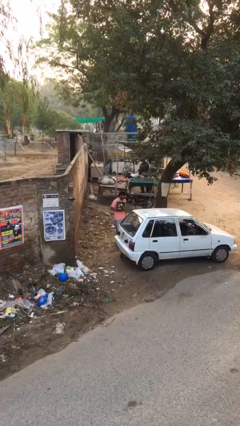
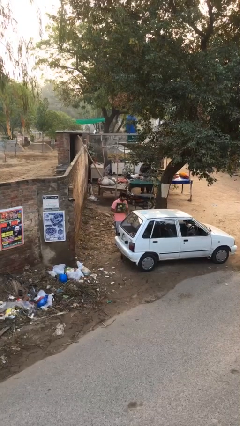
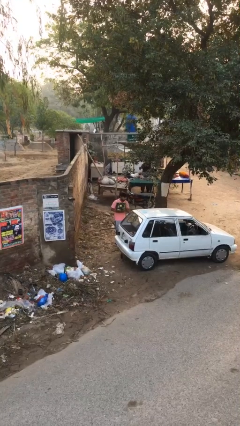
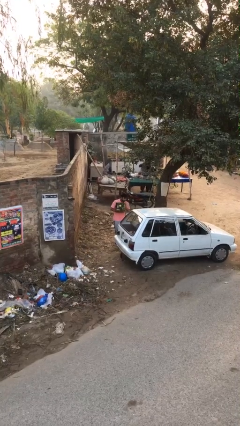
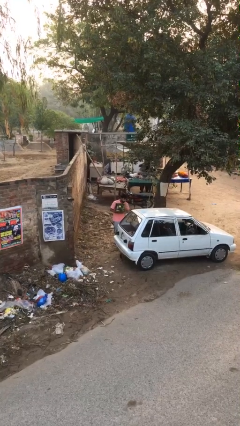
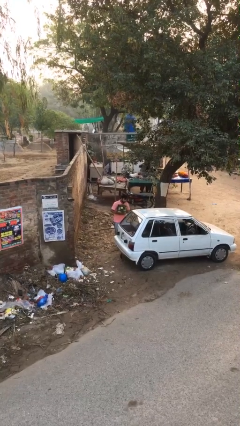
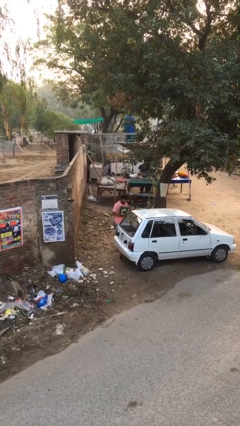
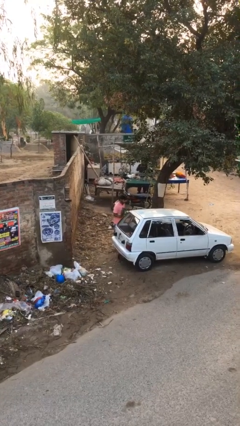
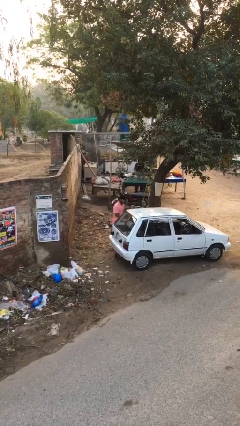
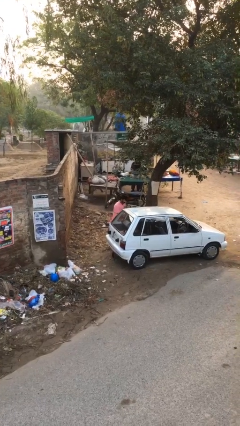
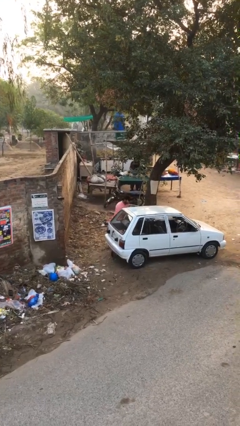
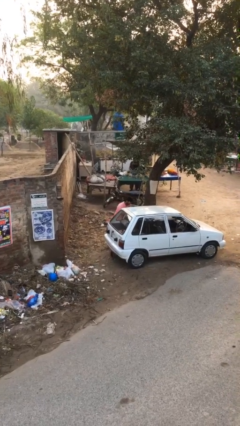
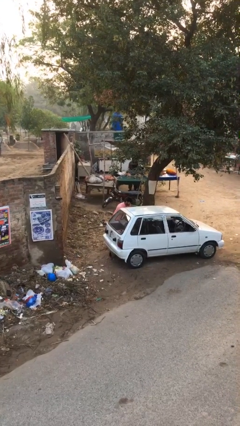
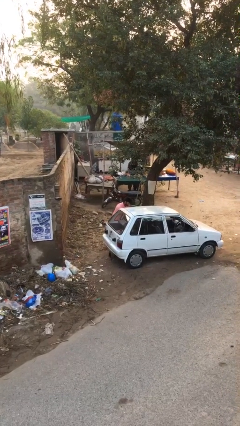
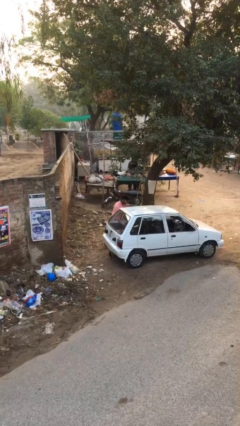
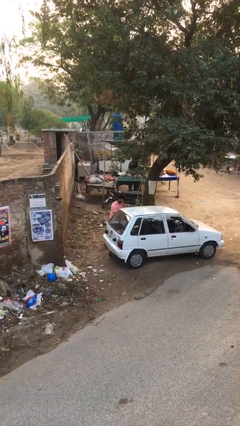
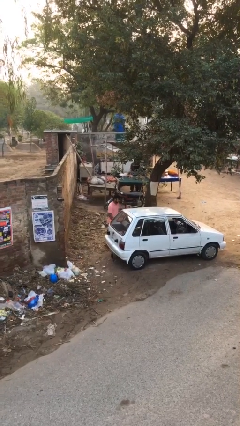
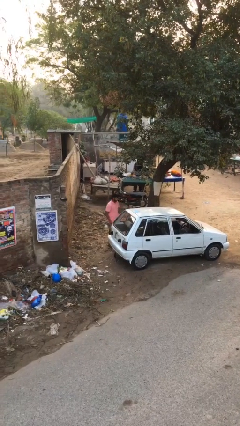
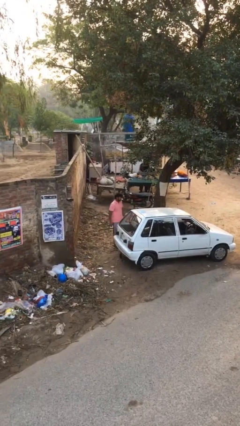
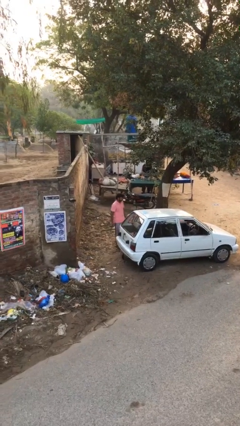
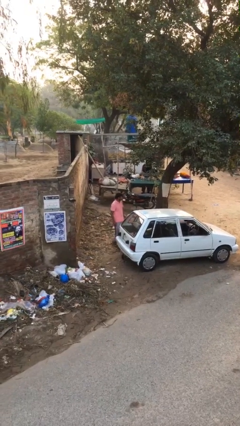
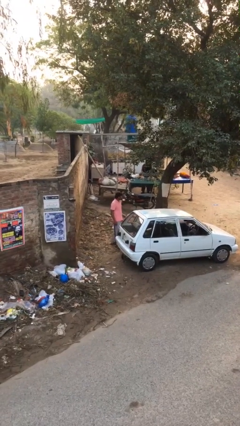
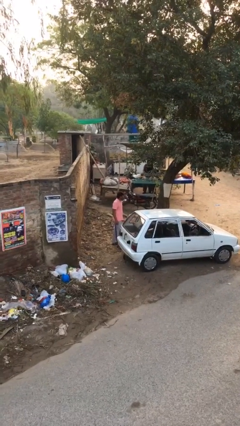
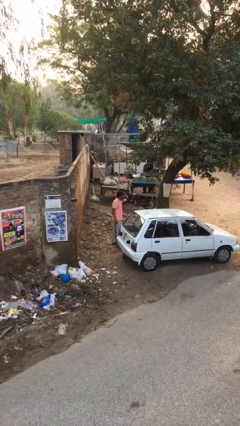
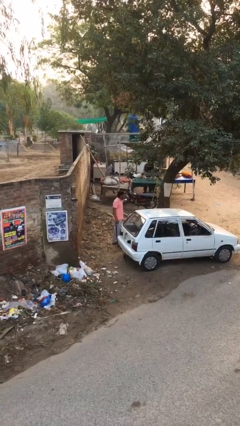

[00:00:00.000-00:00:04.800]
person loads car

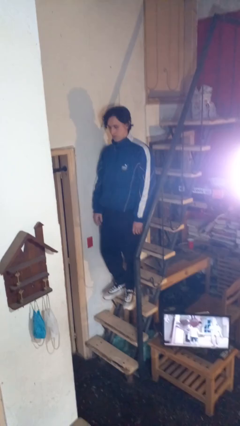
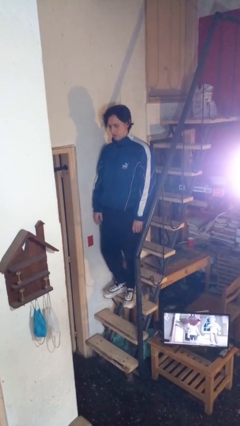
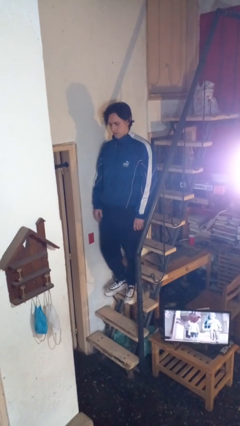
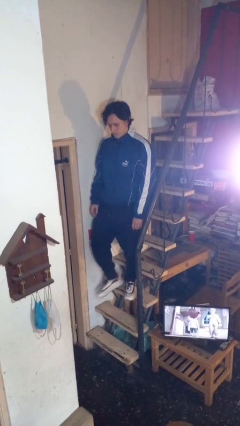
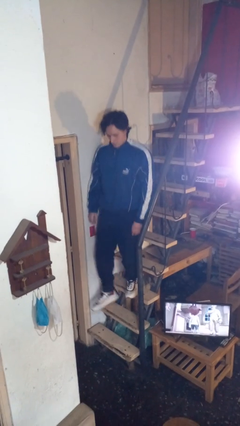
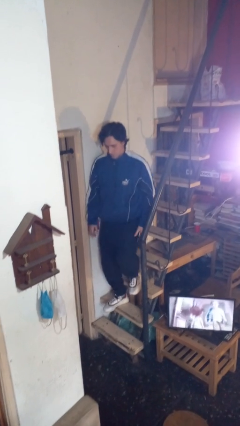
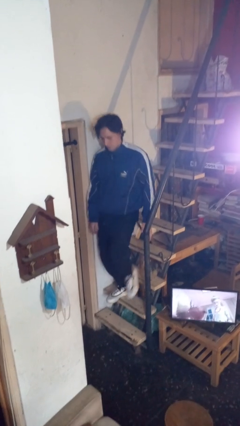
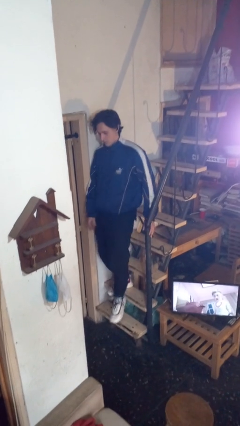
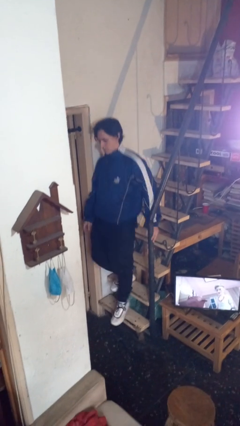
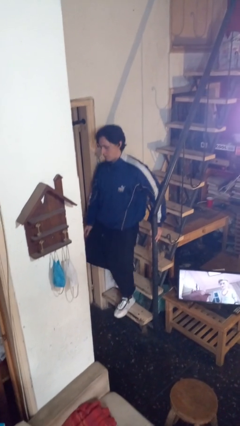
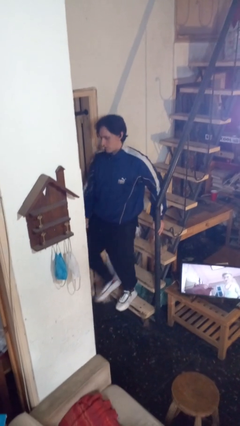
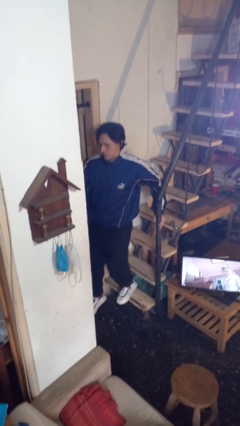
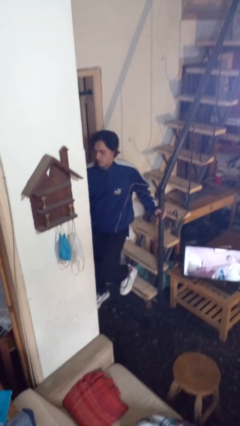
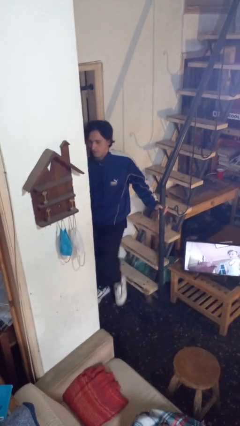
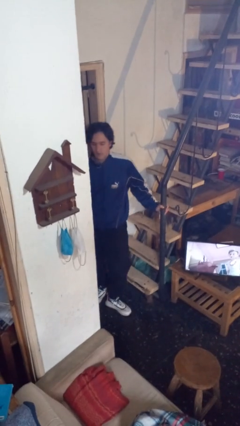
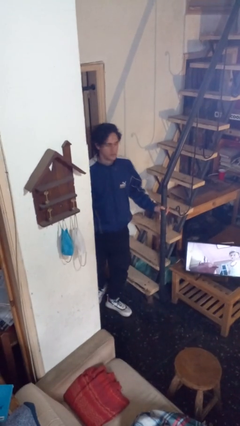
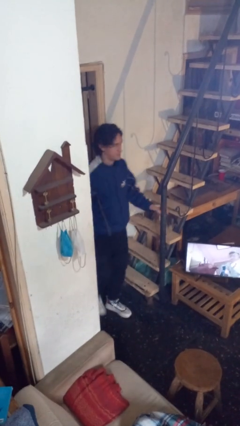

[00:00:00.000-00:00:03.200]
person climbs down stairs

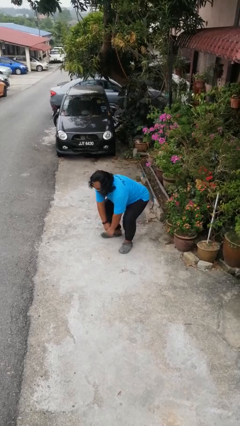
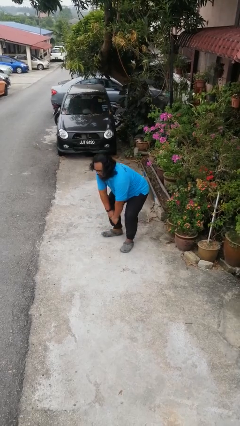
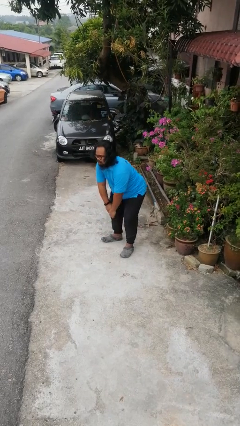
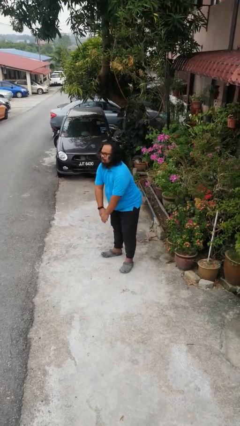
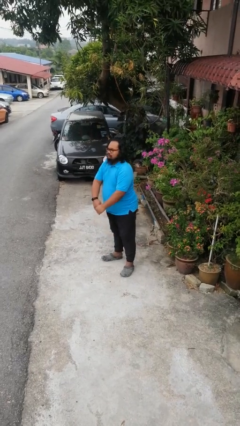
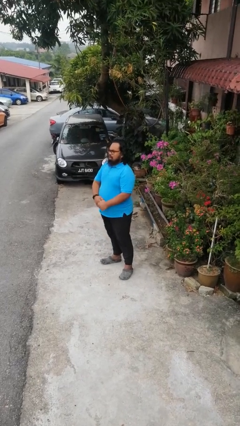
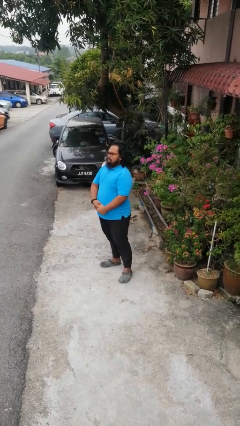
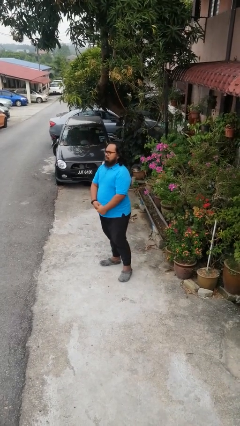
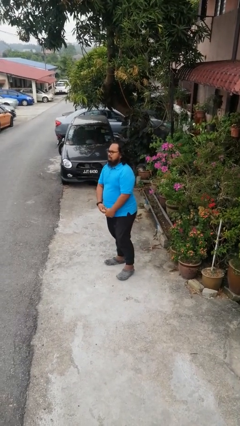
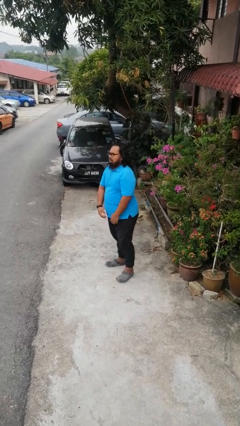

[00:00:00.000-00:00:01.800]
person stands up

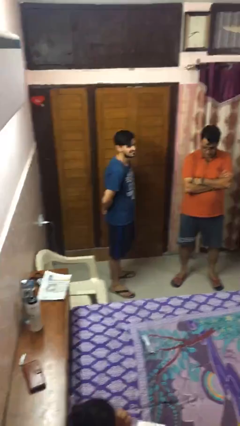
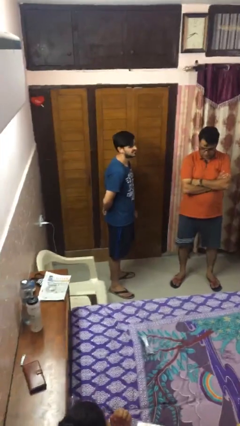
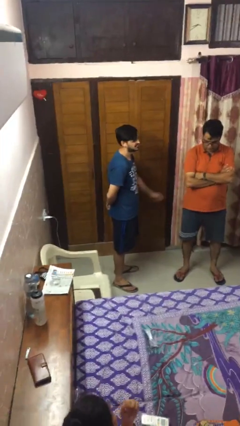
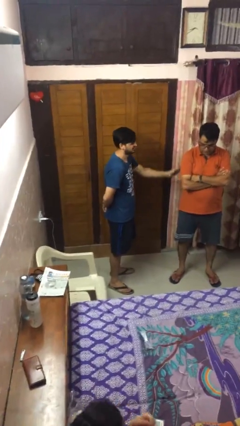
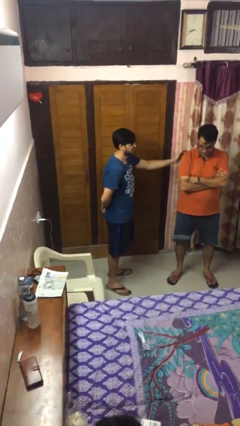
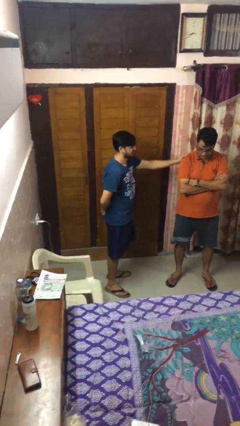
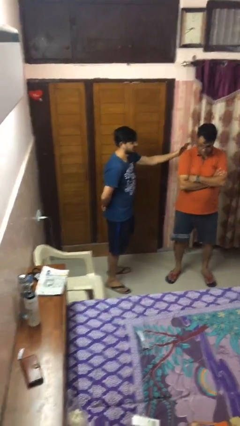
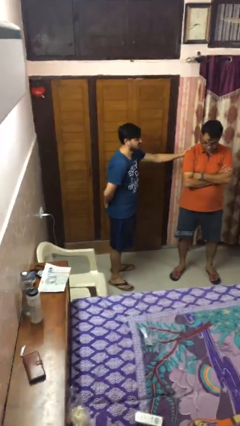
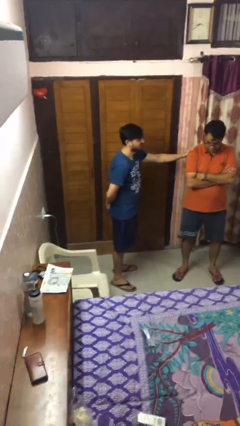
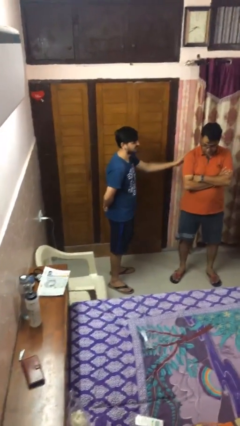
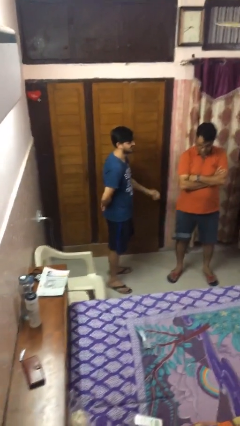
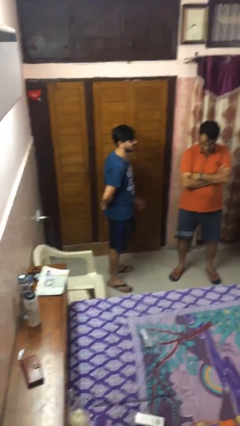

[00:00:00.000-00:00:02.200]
person pounds shoulders of person

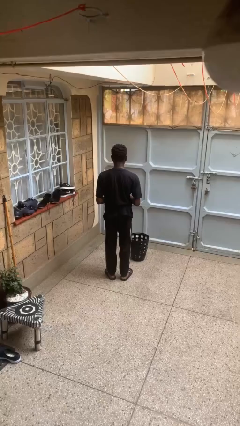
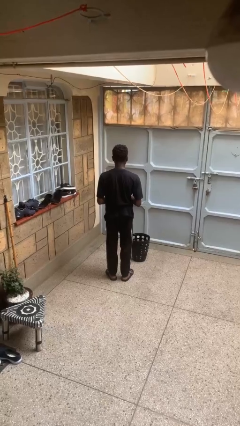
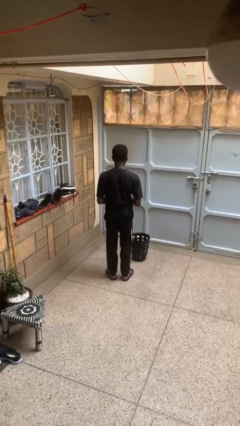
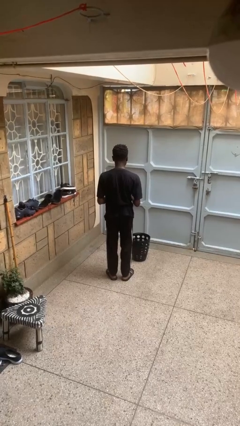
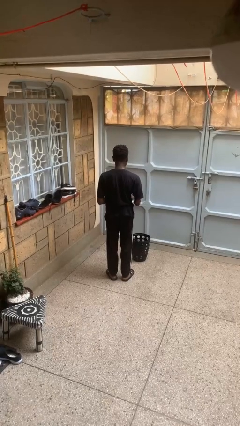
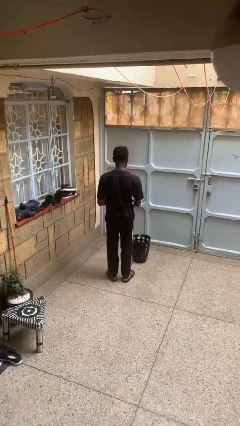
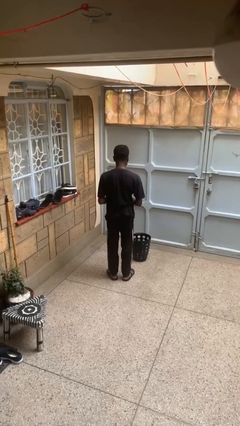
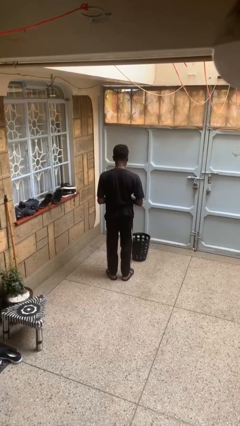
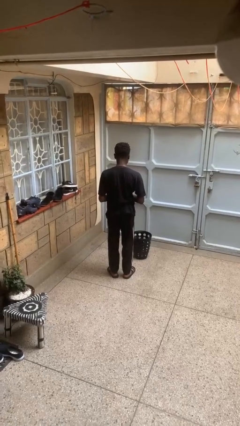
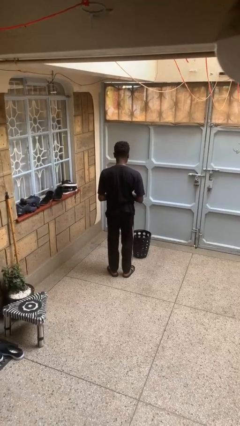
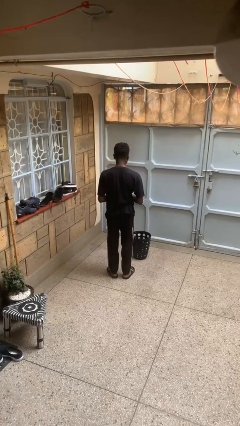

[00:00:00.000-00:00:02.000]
person discards trash

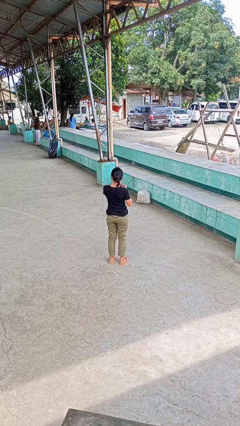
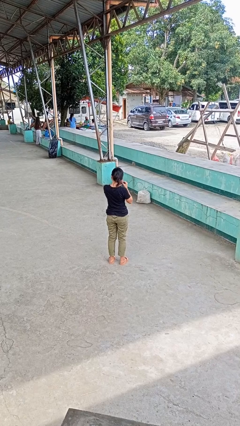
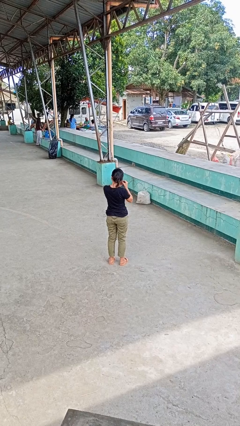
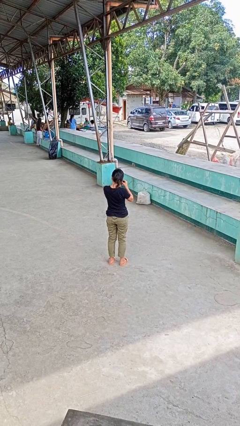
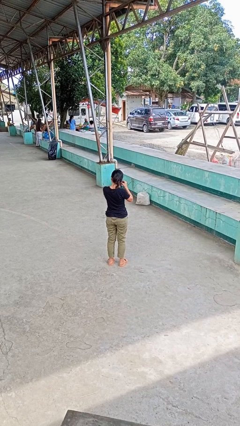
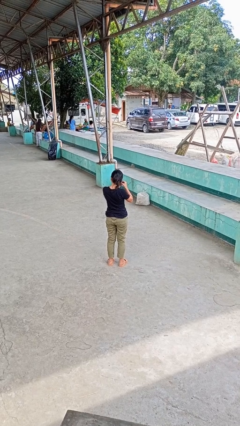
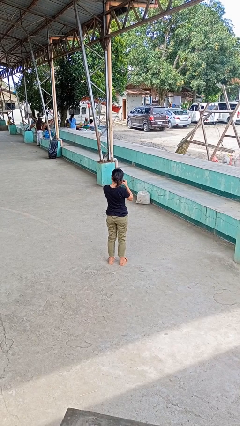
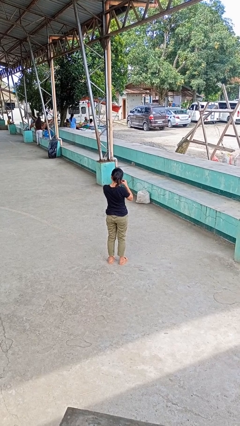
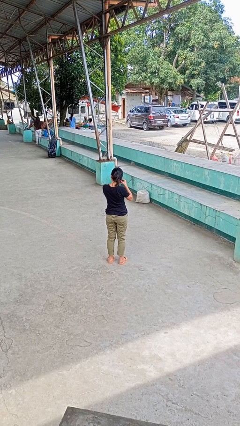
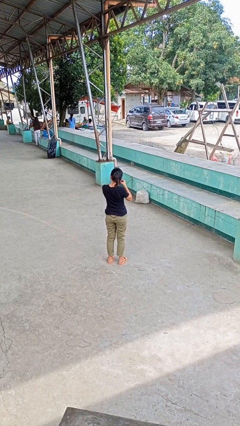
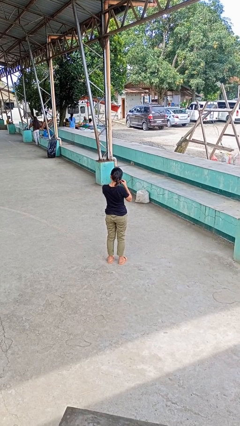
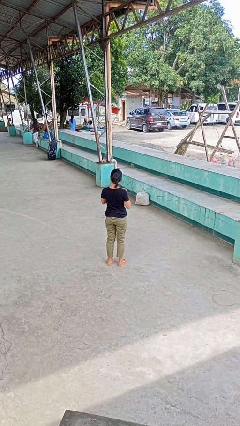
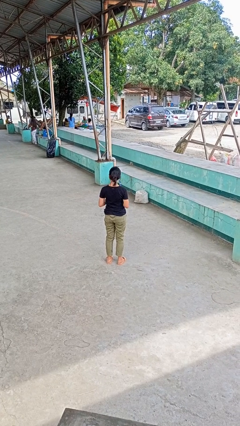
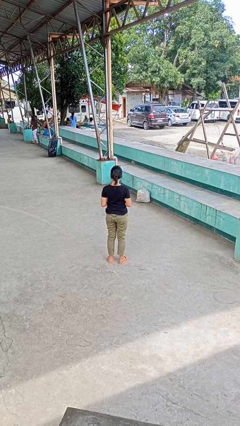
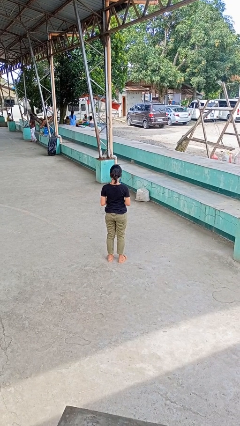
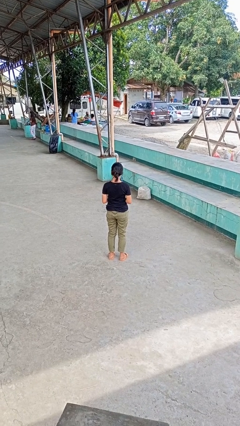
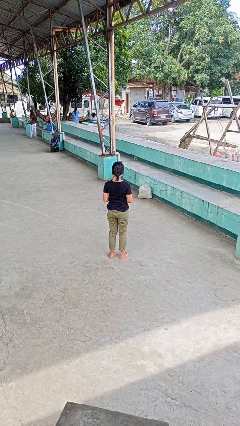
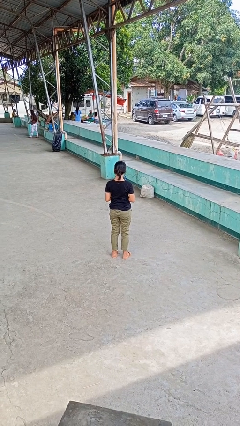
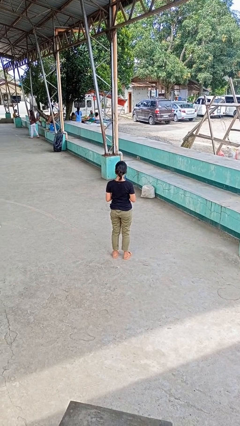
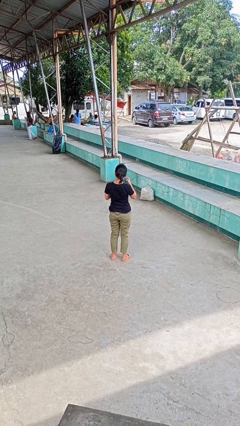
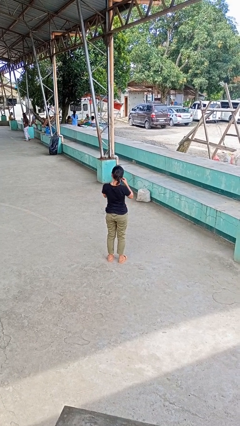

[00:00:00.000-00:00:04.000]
person puts on earrings
